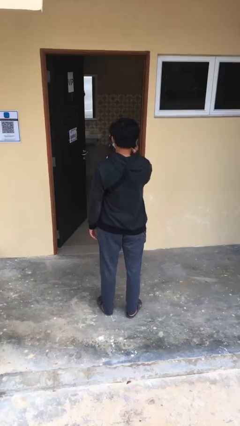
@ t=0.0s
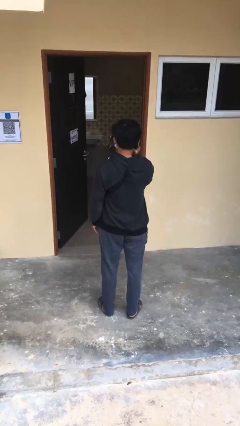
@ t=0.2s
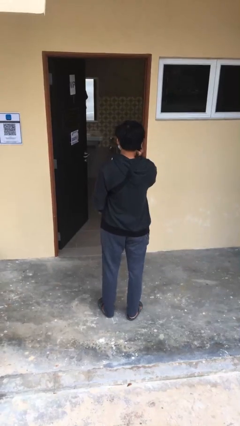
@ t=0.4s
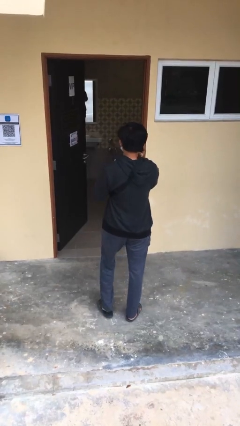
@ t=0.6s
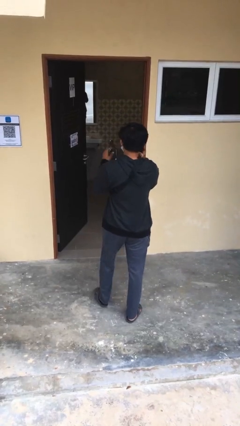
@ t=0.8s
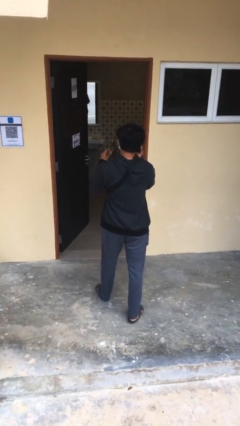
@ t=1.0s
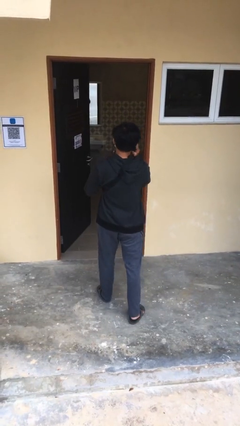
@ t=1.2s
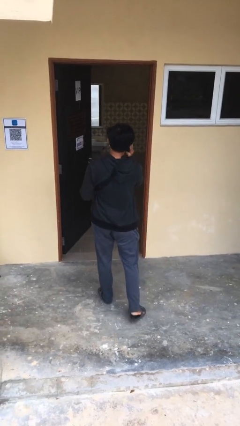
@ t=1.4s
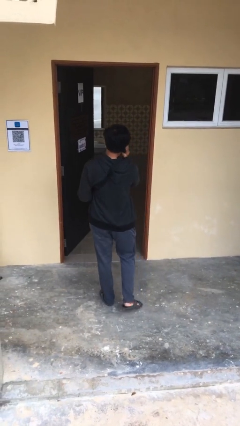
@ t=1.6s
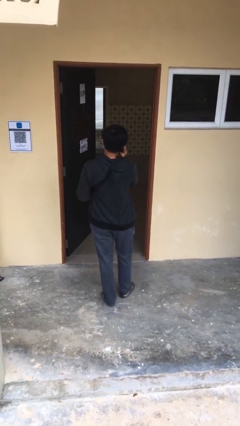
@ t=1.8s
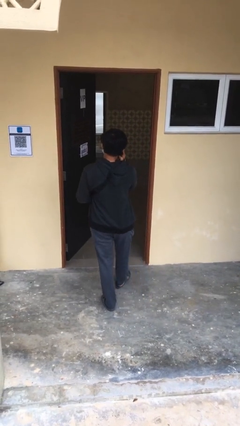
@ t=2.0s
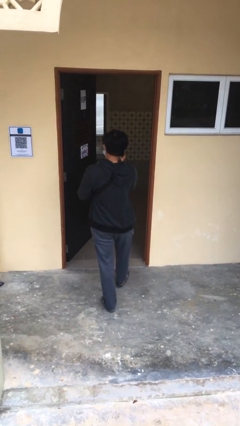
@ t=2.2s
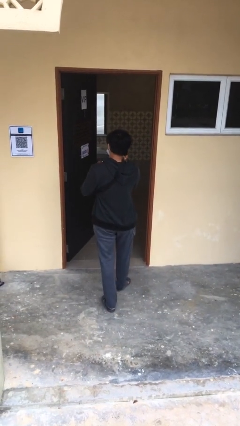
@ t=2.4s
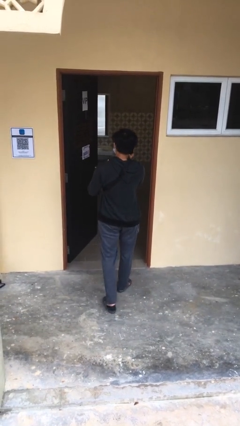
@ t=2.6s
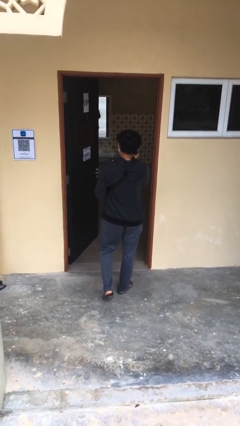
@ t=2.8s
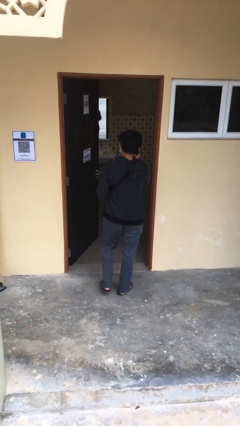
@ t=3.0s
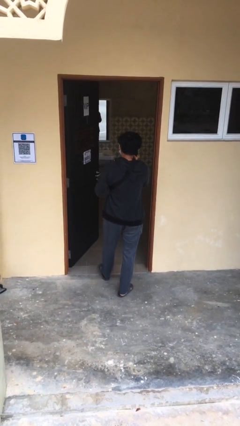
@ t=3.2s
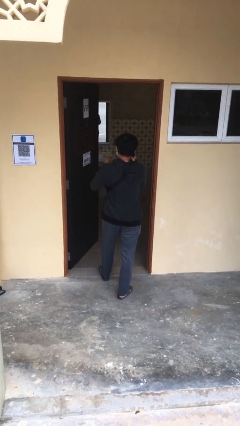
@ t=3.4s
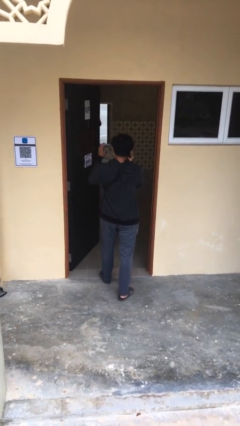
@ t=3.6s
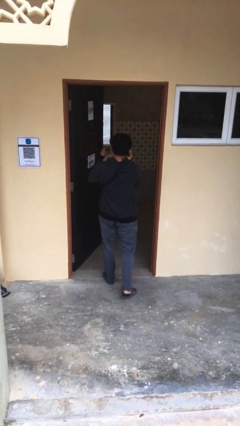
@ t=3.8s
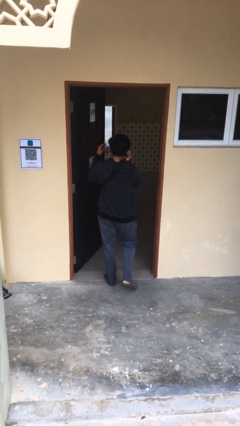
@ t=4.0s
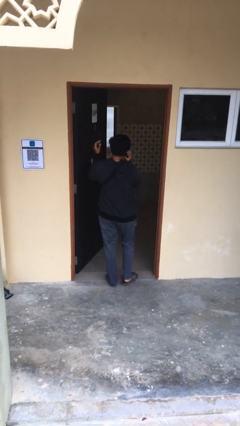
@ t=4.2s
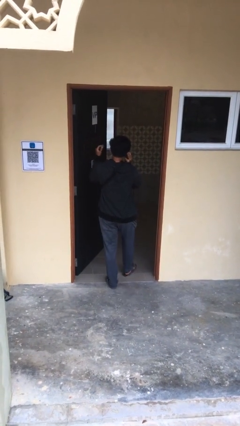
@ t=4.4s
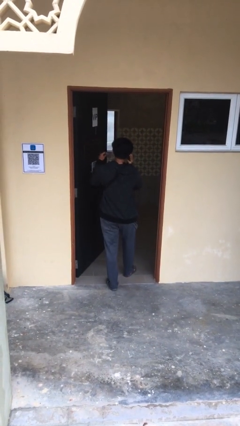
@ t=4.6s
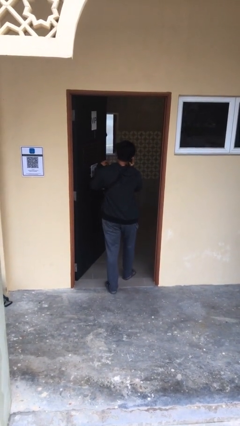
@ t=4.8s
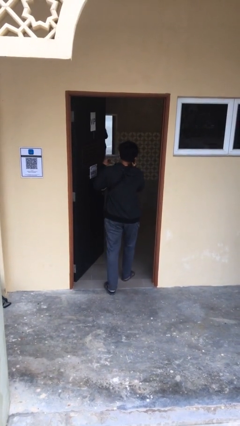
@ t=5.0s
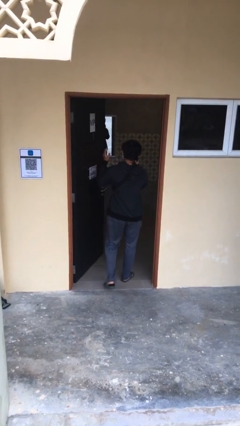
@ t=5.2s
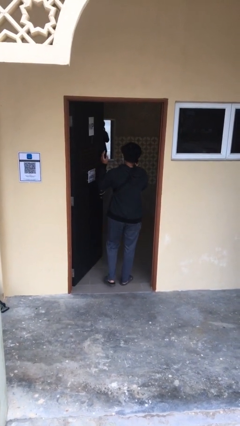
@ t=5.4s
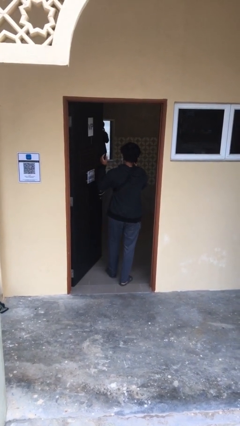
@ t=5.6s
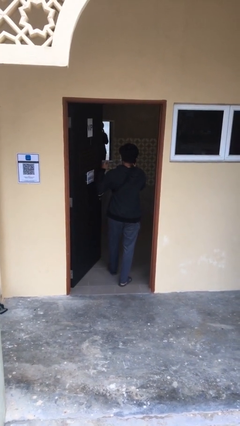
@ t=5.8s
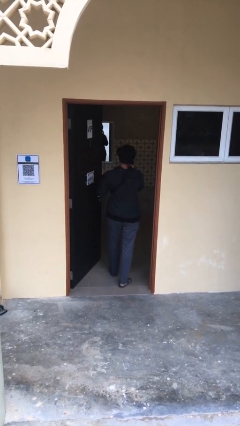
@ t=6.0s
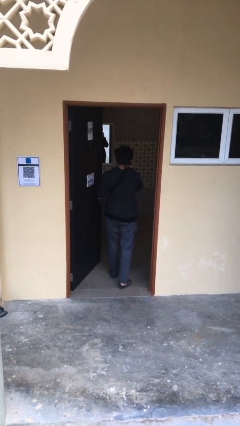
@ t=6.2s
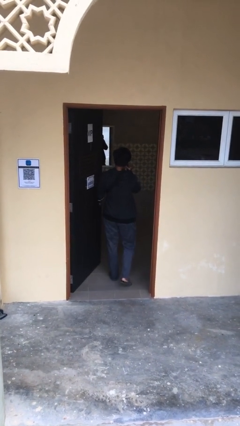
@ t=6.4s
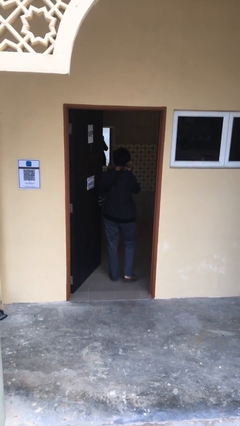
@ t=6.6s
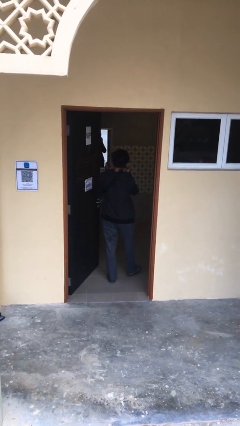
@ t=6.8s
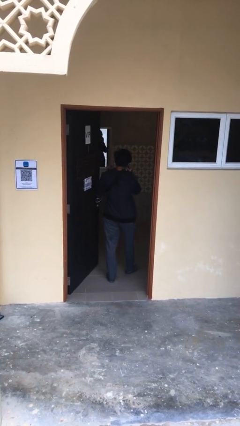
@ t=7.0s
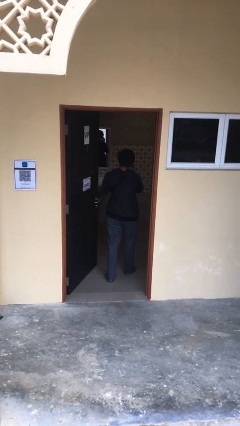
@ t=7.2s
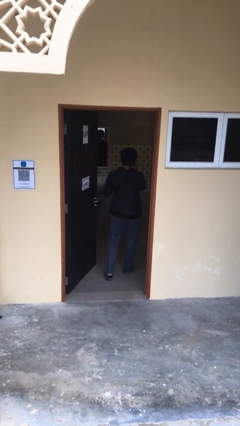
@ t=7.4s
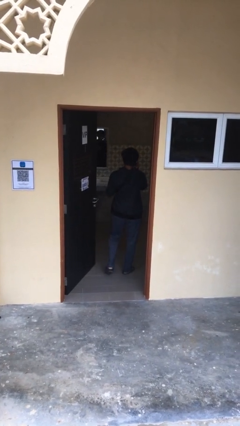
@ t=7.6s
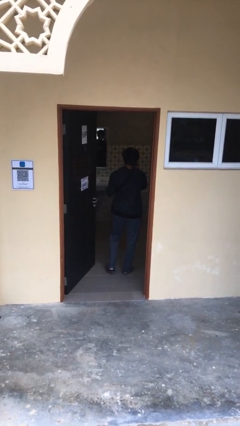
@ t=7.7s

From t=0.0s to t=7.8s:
person exits scene through structure

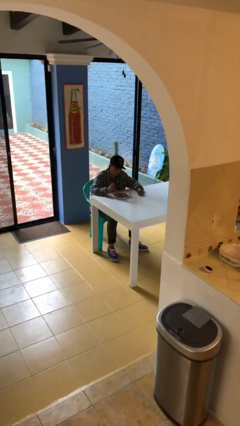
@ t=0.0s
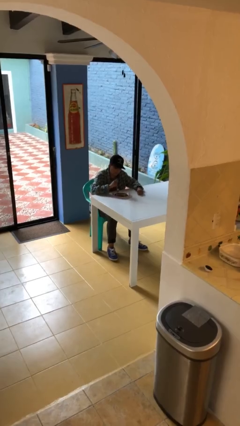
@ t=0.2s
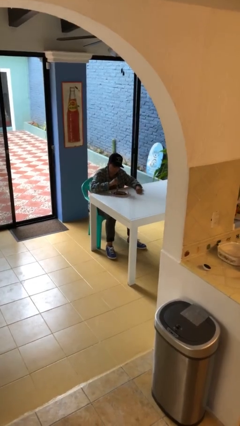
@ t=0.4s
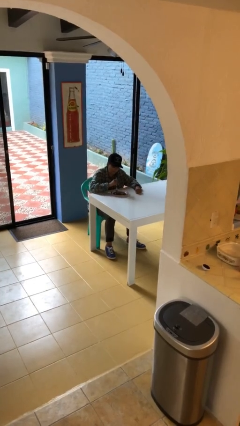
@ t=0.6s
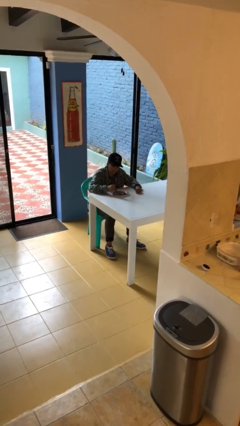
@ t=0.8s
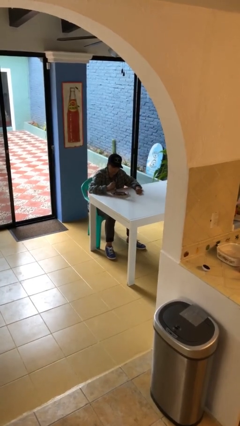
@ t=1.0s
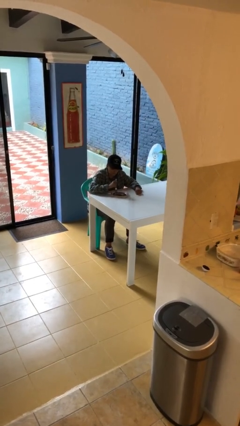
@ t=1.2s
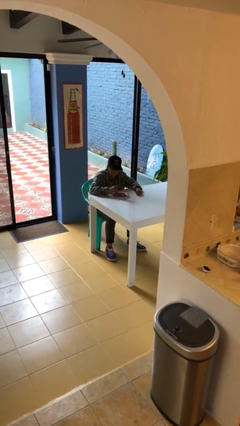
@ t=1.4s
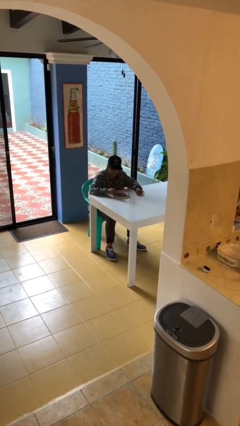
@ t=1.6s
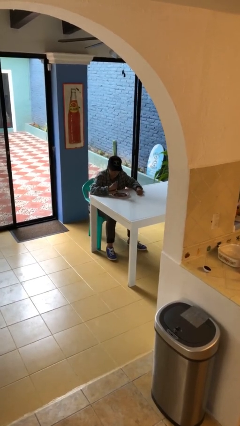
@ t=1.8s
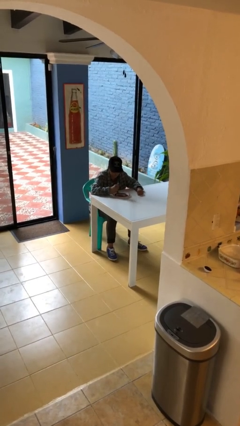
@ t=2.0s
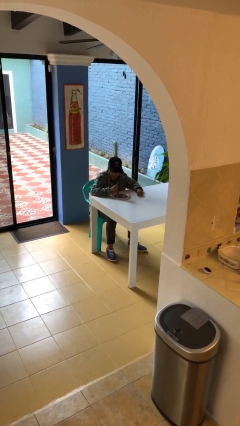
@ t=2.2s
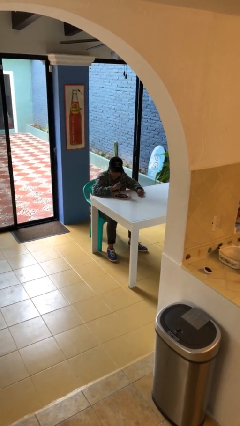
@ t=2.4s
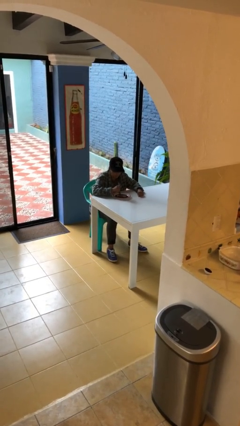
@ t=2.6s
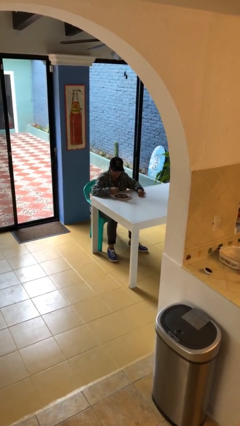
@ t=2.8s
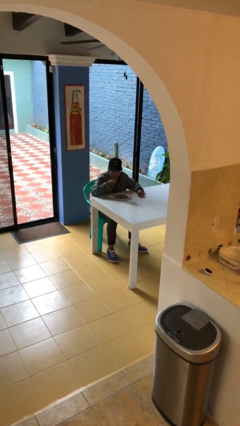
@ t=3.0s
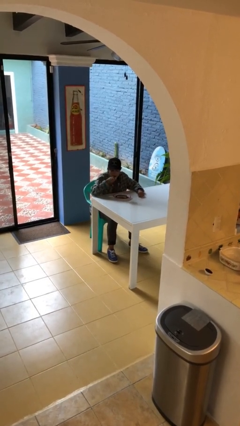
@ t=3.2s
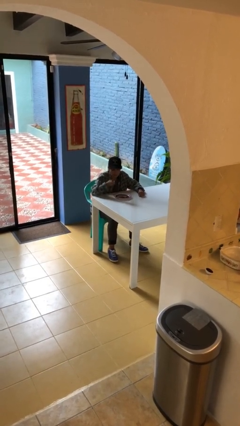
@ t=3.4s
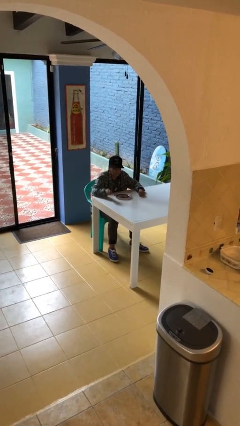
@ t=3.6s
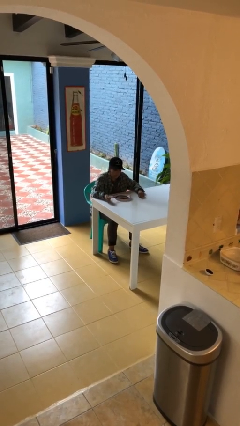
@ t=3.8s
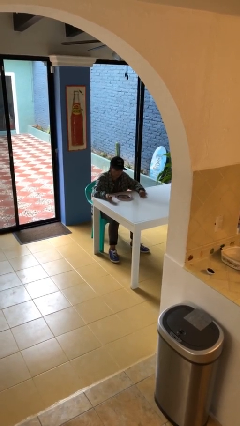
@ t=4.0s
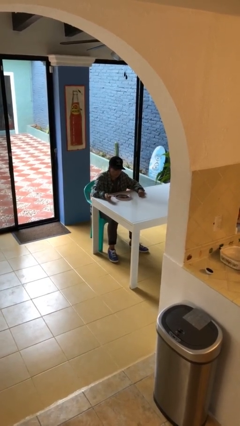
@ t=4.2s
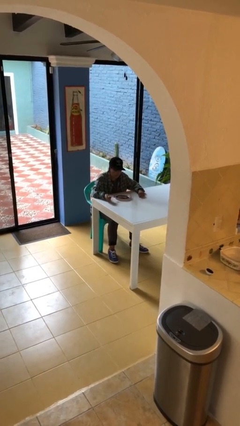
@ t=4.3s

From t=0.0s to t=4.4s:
person eats with utensil

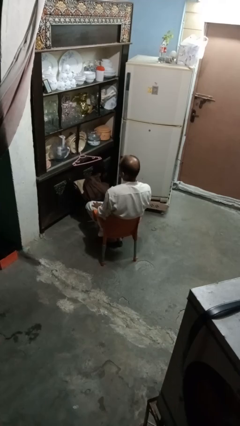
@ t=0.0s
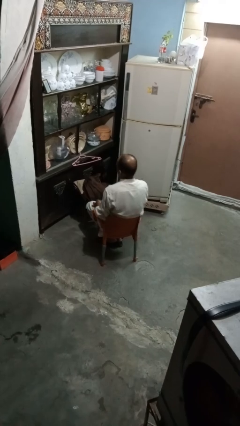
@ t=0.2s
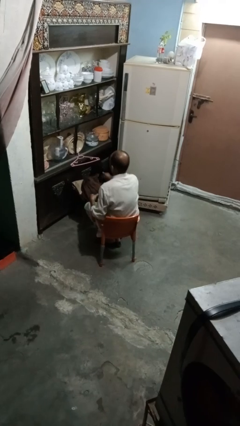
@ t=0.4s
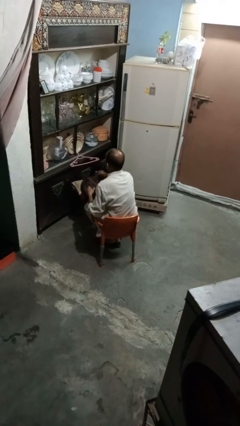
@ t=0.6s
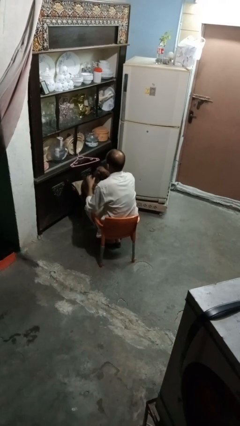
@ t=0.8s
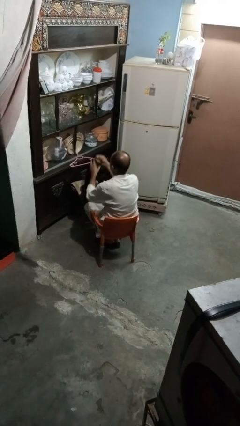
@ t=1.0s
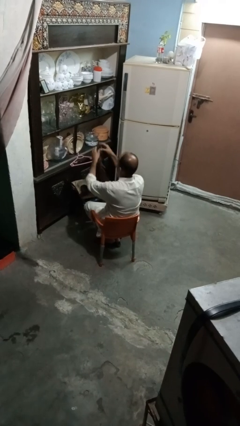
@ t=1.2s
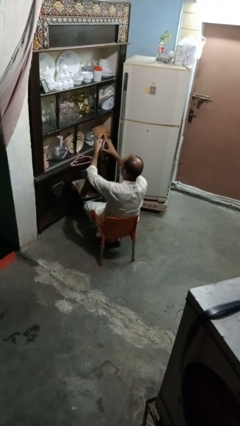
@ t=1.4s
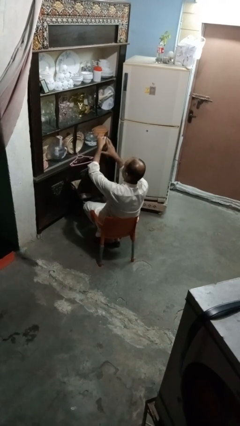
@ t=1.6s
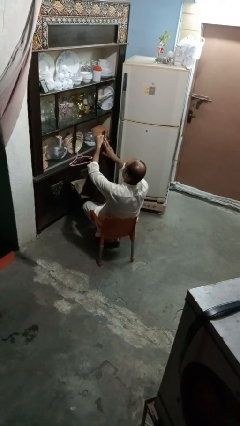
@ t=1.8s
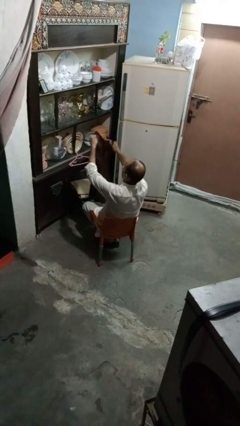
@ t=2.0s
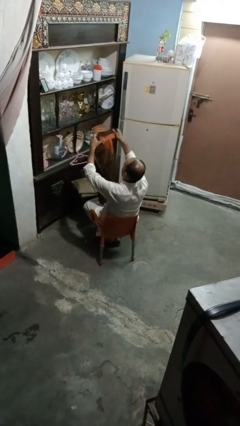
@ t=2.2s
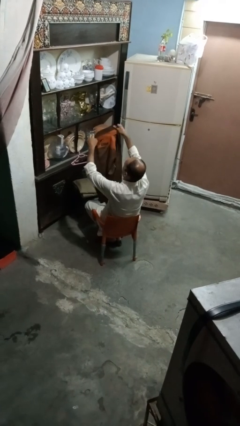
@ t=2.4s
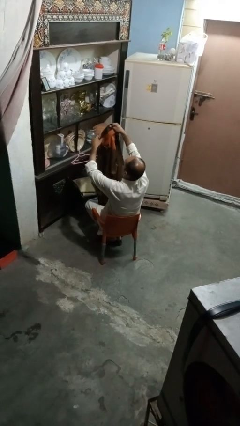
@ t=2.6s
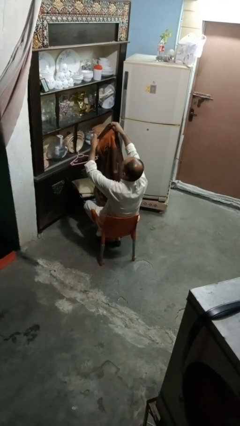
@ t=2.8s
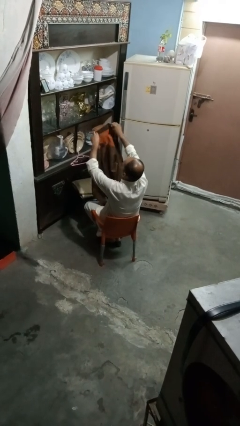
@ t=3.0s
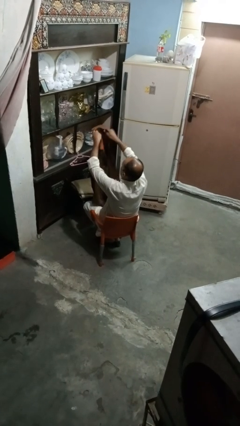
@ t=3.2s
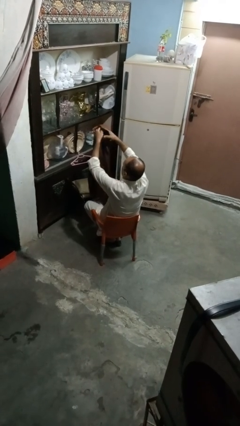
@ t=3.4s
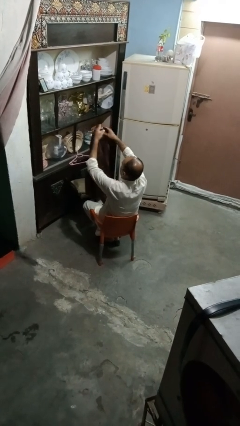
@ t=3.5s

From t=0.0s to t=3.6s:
person folds shirt

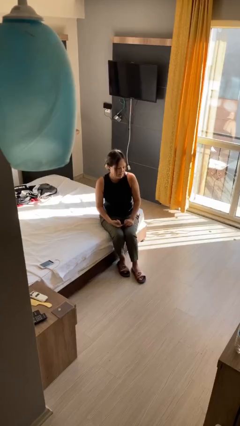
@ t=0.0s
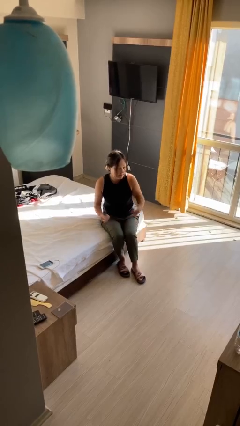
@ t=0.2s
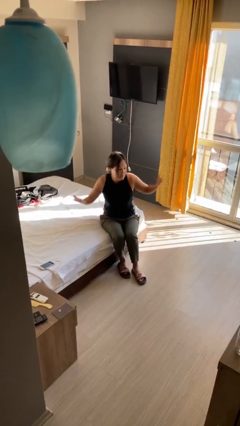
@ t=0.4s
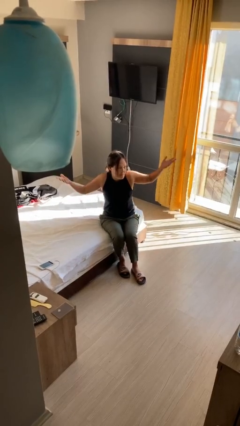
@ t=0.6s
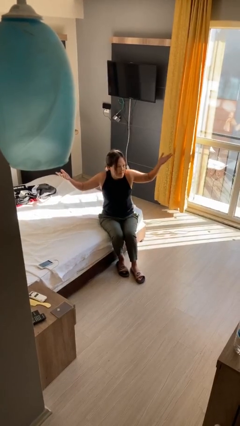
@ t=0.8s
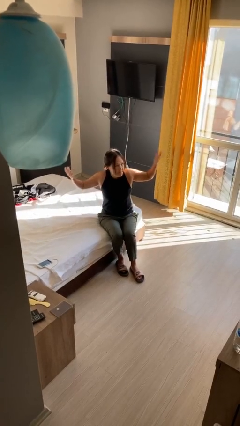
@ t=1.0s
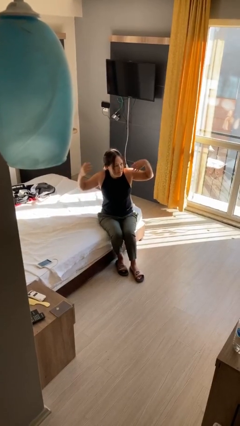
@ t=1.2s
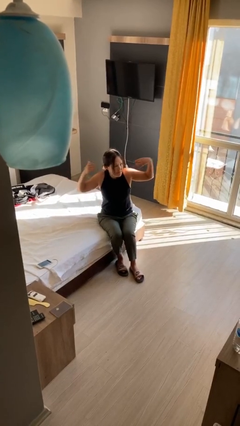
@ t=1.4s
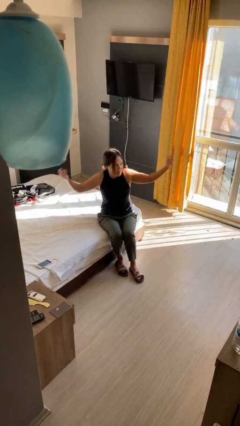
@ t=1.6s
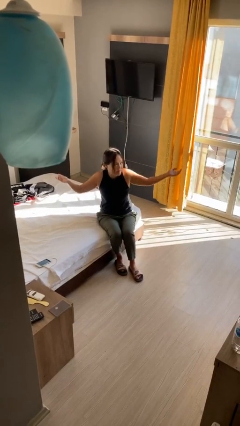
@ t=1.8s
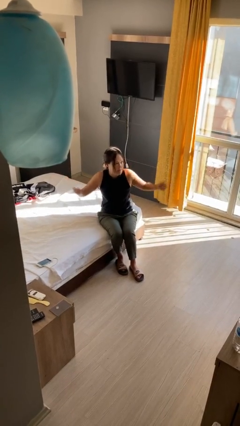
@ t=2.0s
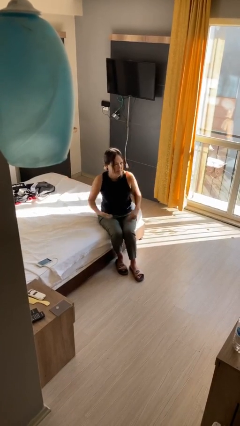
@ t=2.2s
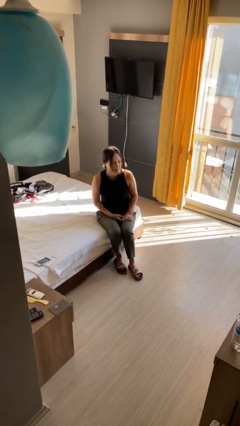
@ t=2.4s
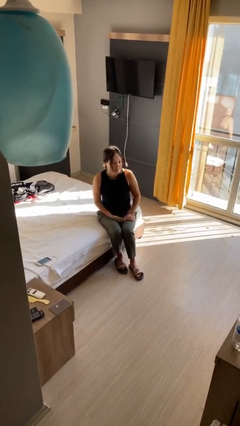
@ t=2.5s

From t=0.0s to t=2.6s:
person shrugs
